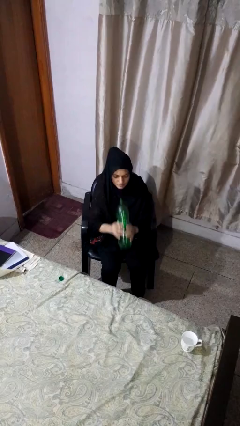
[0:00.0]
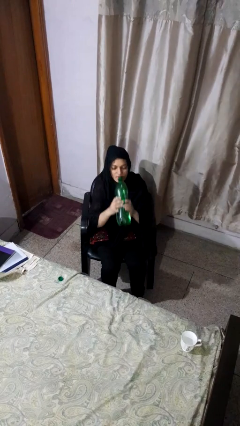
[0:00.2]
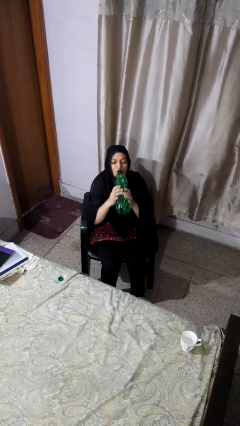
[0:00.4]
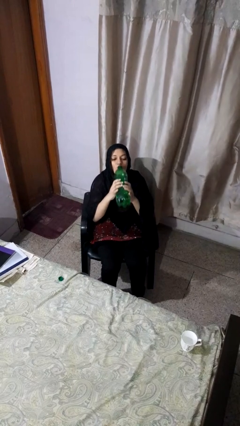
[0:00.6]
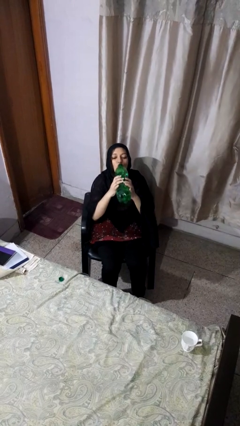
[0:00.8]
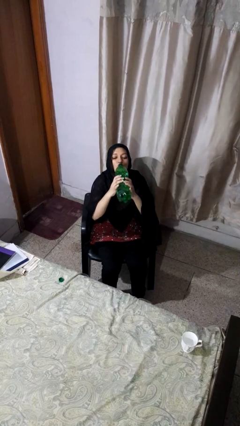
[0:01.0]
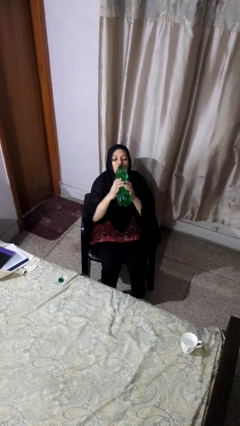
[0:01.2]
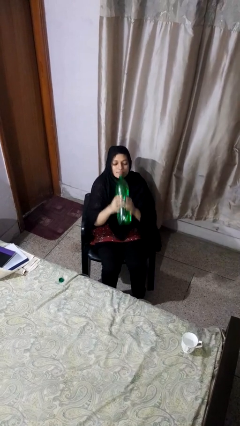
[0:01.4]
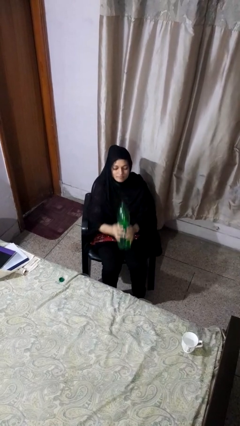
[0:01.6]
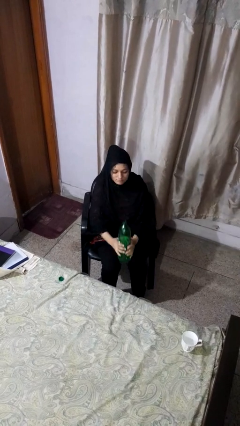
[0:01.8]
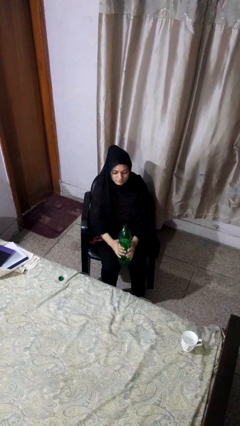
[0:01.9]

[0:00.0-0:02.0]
person drinks from bottle

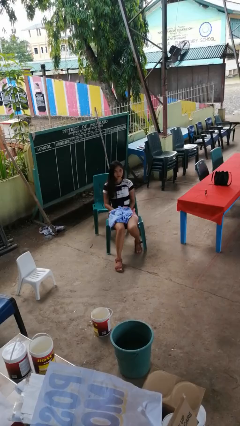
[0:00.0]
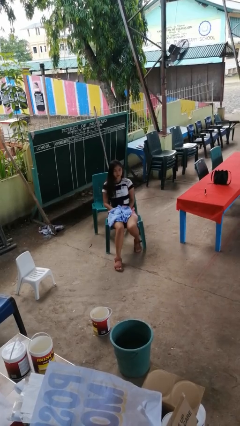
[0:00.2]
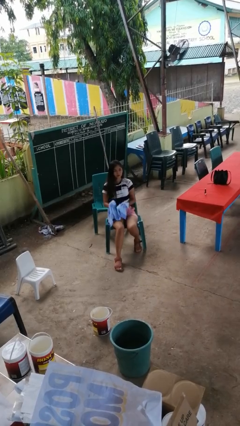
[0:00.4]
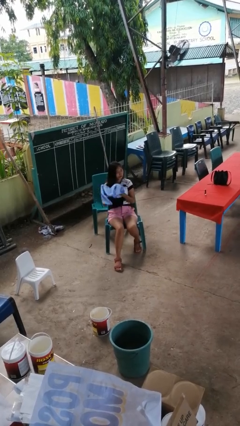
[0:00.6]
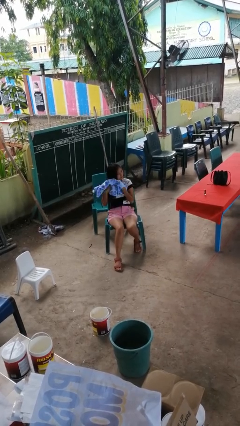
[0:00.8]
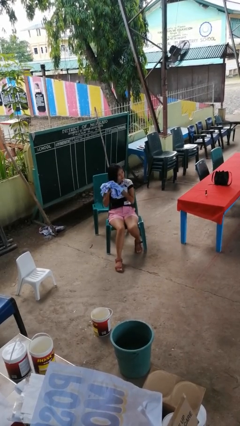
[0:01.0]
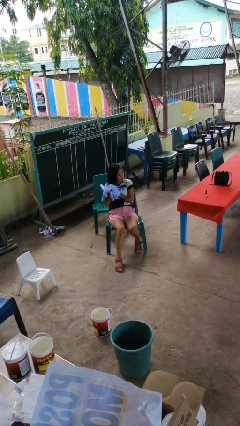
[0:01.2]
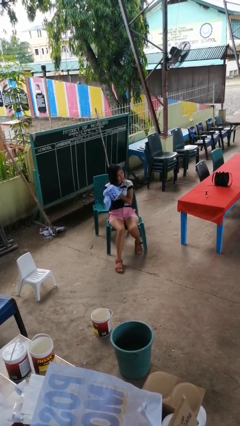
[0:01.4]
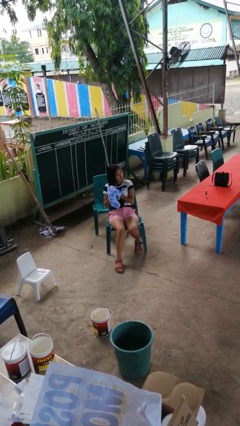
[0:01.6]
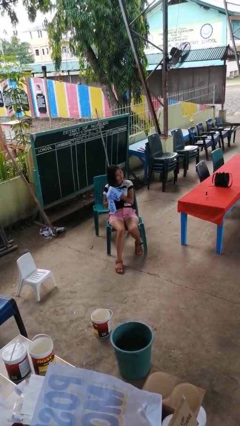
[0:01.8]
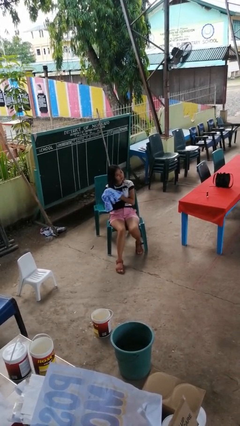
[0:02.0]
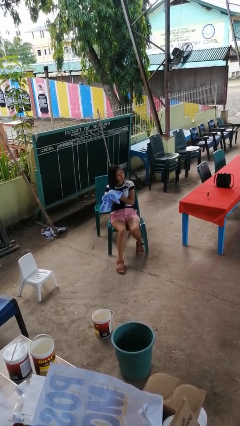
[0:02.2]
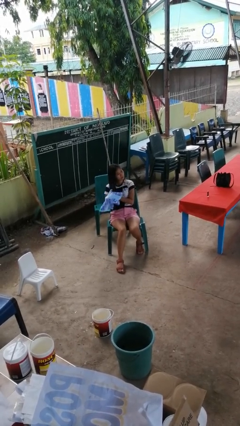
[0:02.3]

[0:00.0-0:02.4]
person dries hair with towel

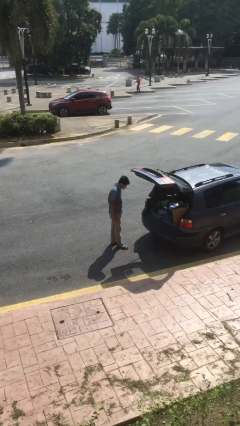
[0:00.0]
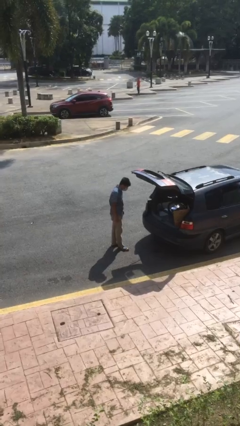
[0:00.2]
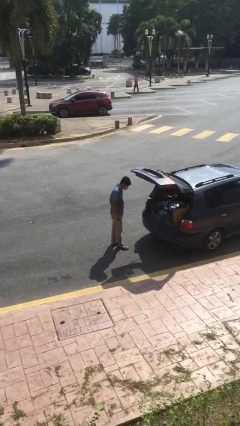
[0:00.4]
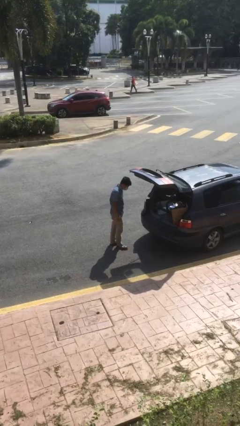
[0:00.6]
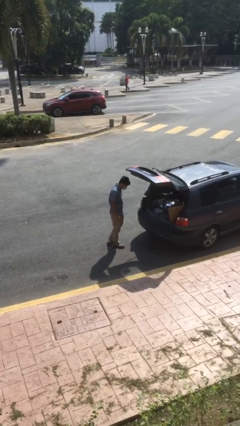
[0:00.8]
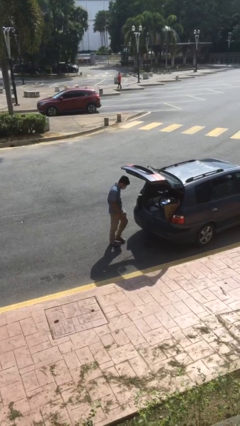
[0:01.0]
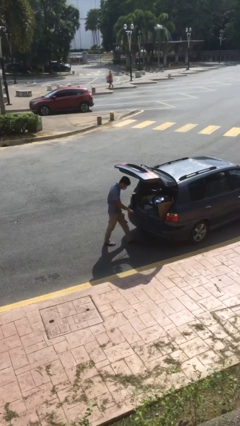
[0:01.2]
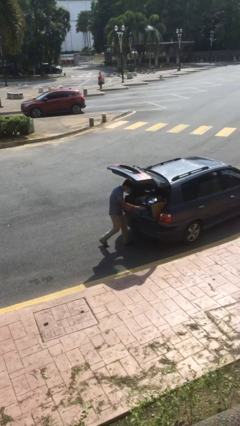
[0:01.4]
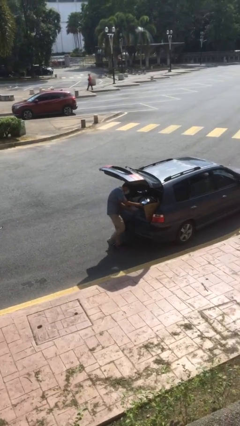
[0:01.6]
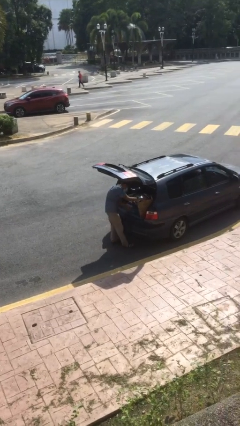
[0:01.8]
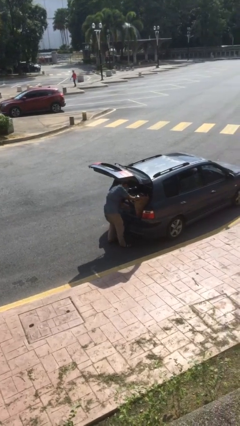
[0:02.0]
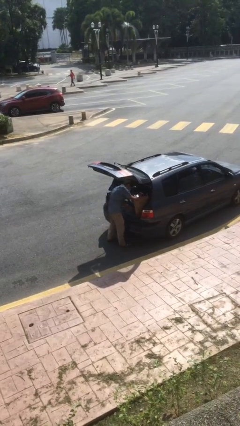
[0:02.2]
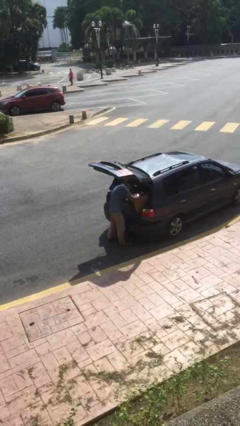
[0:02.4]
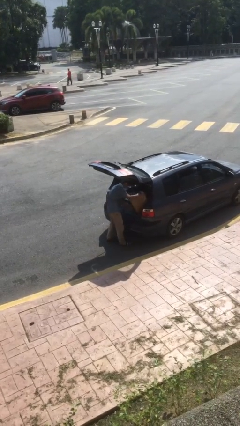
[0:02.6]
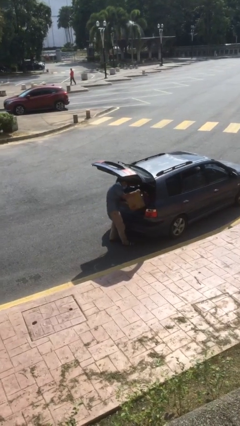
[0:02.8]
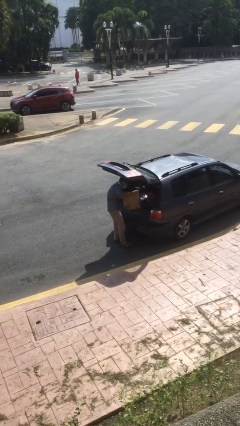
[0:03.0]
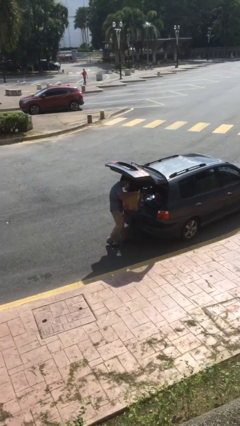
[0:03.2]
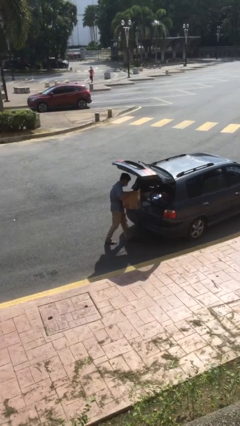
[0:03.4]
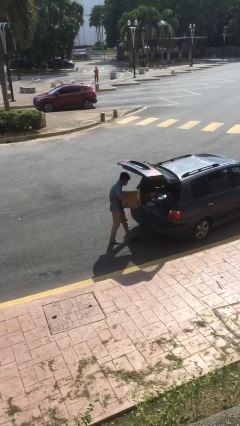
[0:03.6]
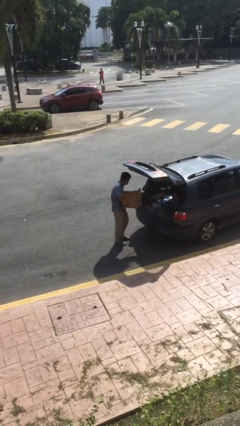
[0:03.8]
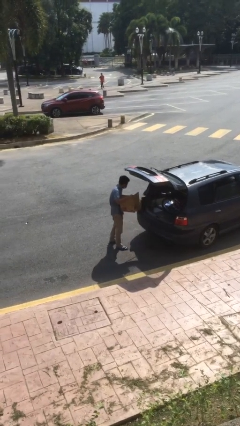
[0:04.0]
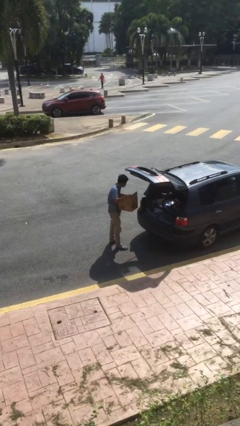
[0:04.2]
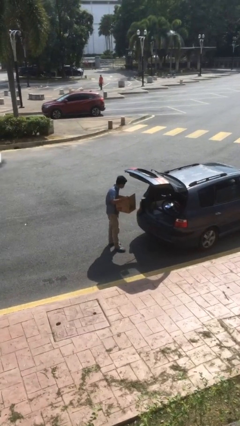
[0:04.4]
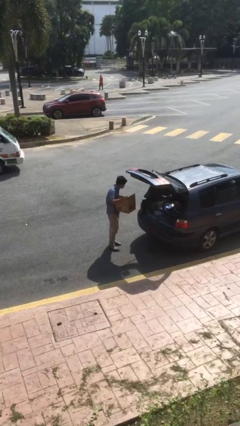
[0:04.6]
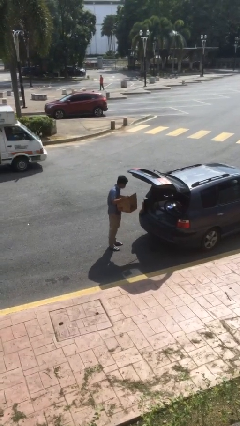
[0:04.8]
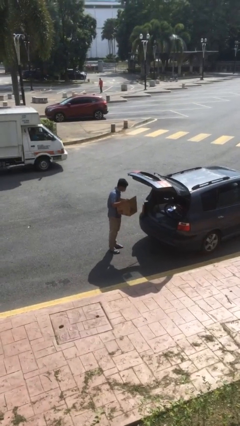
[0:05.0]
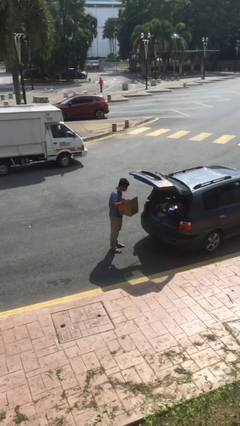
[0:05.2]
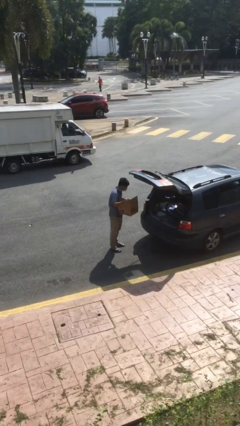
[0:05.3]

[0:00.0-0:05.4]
person unloads car

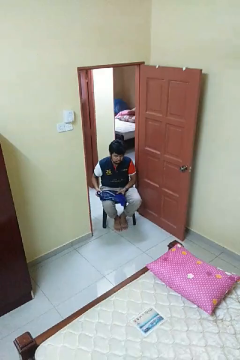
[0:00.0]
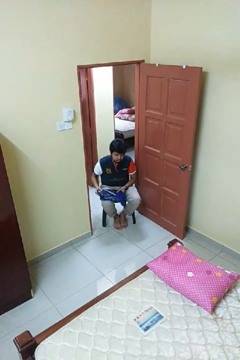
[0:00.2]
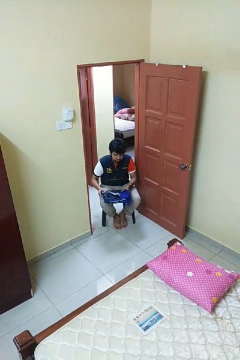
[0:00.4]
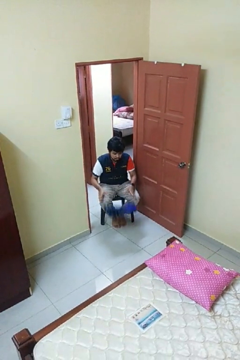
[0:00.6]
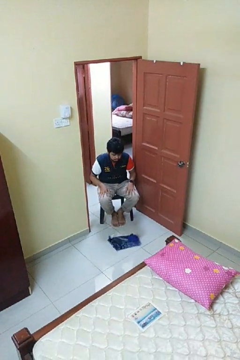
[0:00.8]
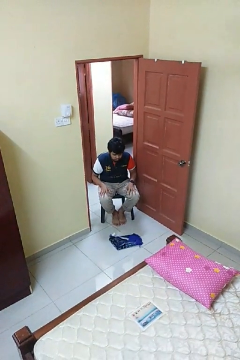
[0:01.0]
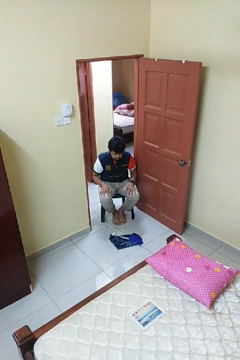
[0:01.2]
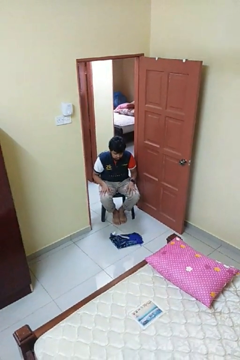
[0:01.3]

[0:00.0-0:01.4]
person drops object

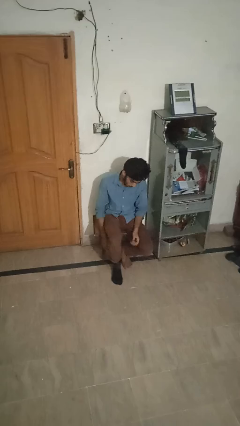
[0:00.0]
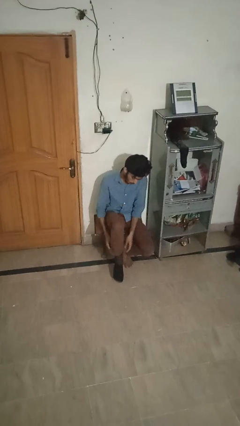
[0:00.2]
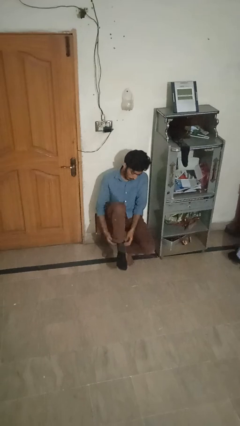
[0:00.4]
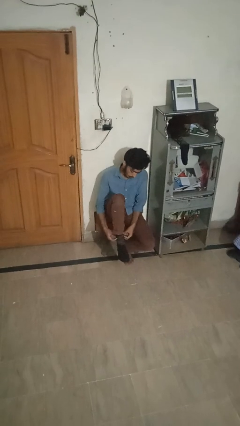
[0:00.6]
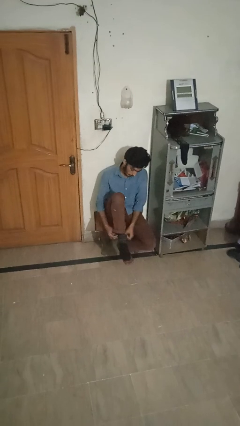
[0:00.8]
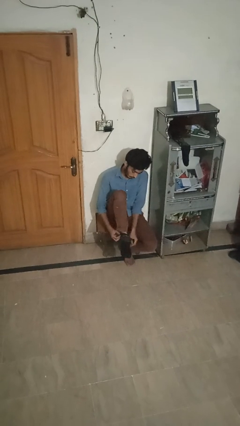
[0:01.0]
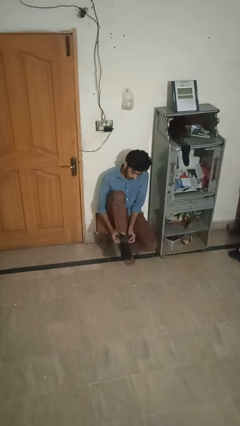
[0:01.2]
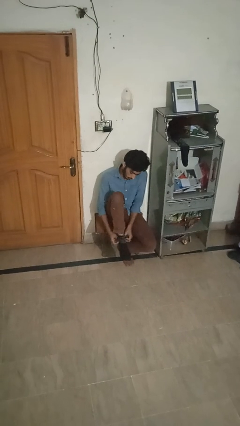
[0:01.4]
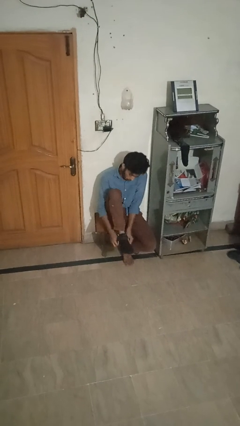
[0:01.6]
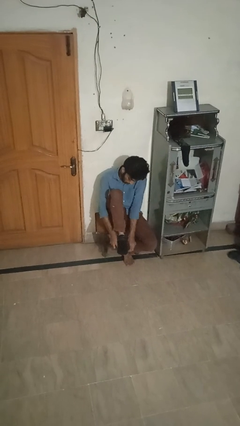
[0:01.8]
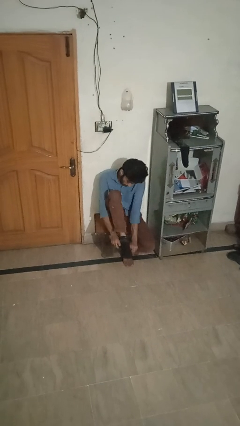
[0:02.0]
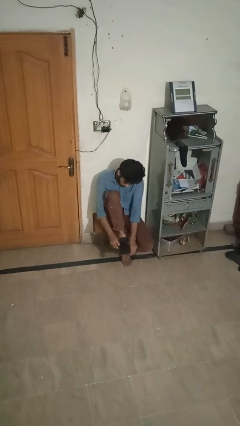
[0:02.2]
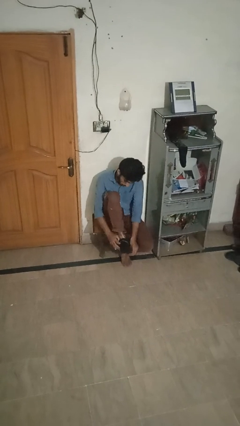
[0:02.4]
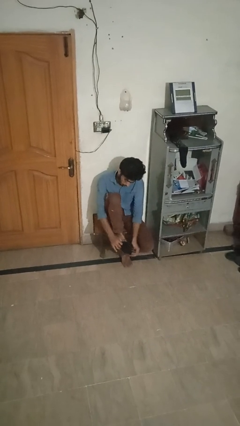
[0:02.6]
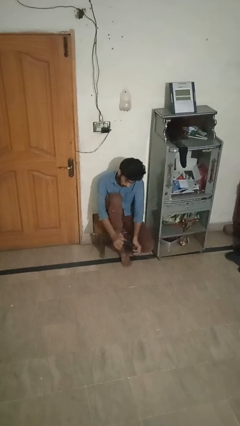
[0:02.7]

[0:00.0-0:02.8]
person takes off socks

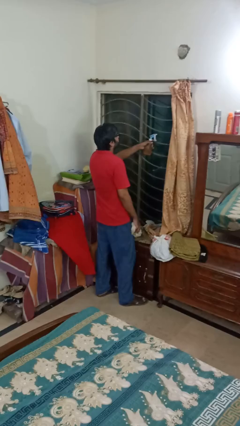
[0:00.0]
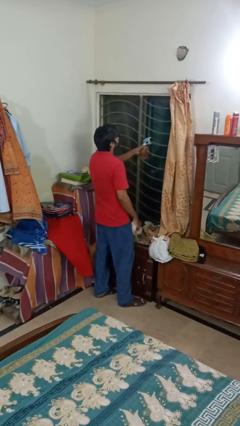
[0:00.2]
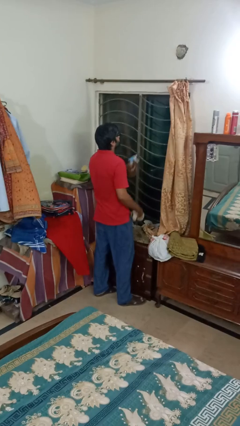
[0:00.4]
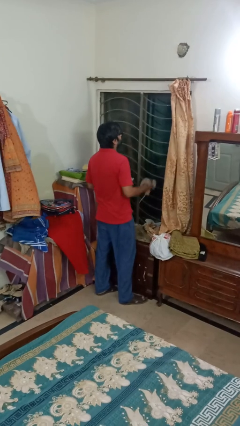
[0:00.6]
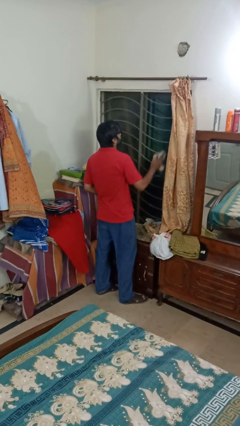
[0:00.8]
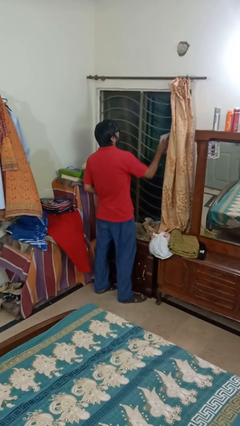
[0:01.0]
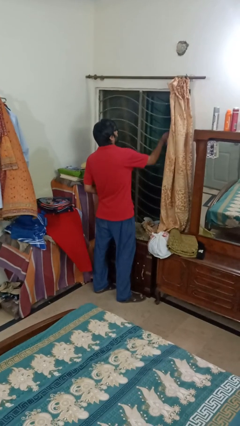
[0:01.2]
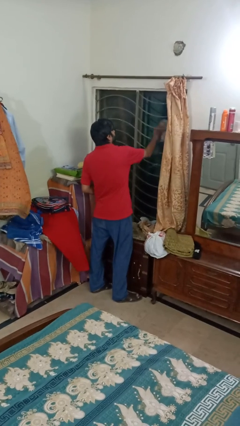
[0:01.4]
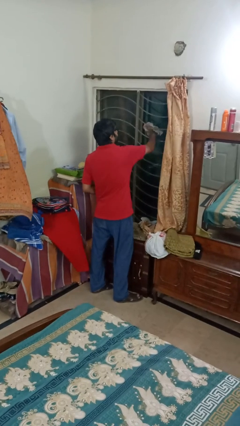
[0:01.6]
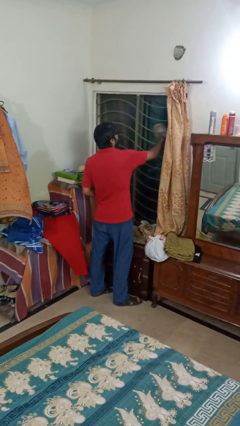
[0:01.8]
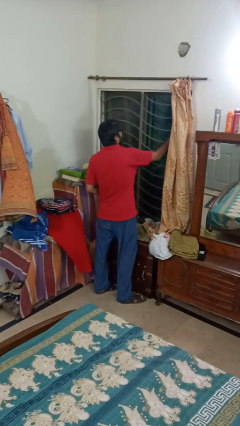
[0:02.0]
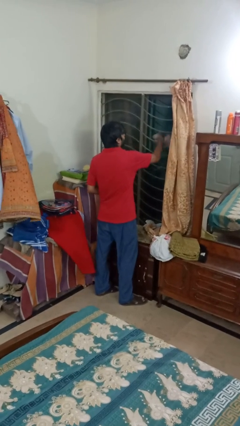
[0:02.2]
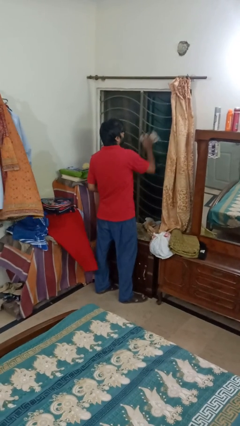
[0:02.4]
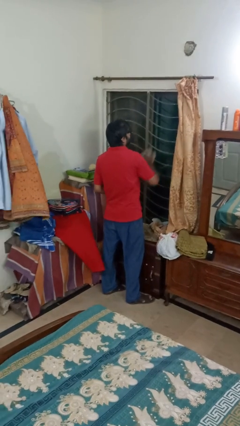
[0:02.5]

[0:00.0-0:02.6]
person washes window

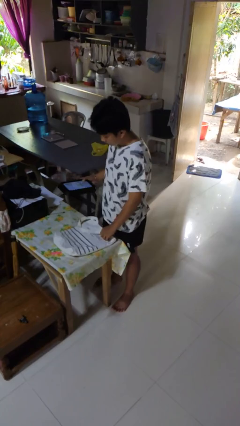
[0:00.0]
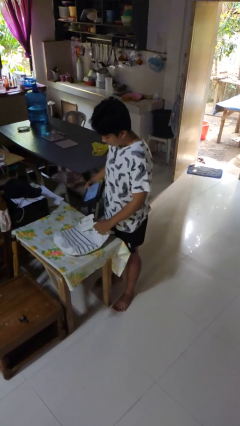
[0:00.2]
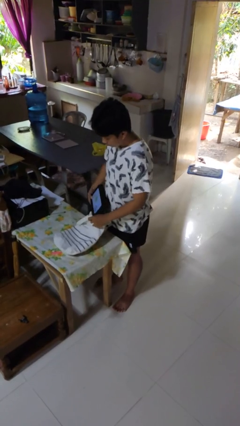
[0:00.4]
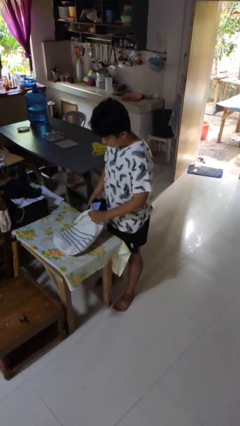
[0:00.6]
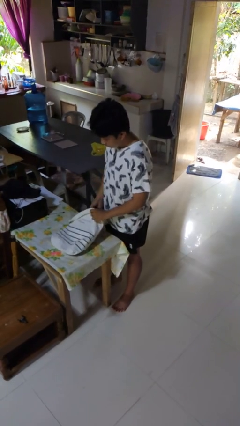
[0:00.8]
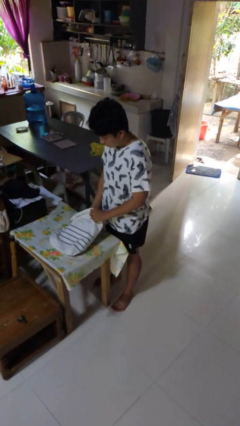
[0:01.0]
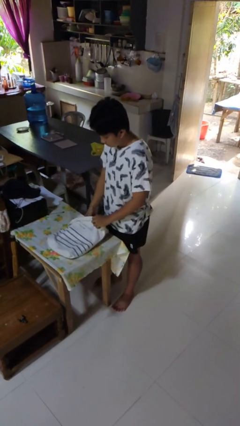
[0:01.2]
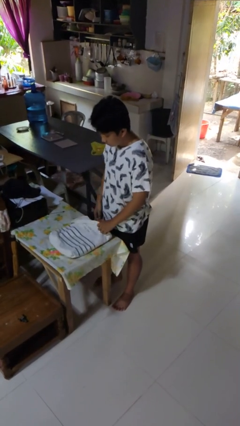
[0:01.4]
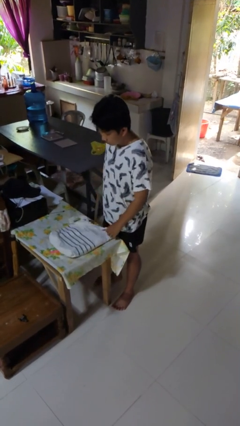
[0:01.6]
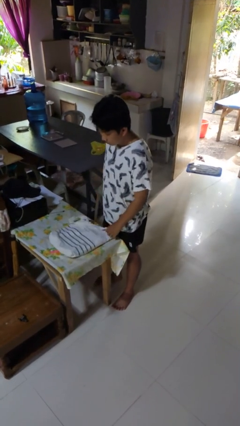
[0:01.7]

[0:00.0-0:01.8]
person puts object into bag
